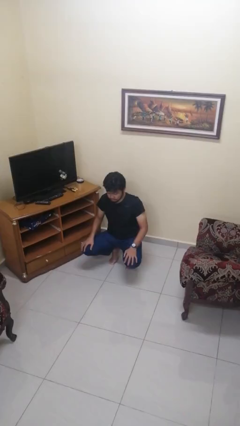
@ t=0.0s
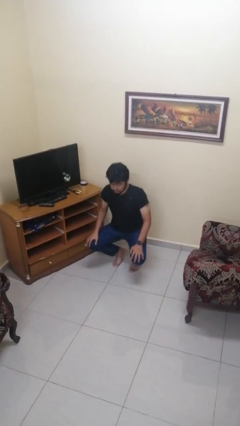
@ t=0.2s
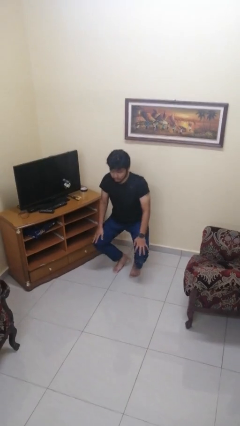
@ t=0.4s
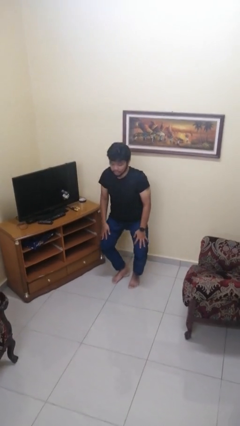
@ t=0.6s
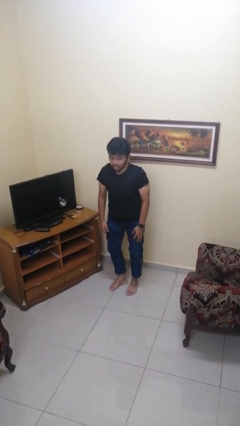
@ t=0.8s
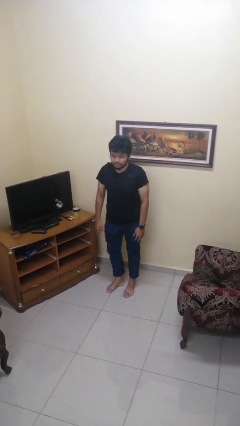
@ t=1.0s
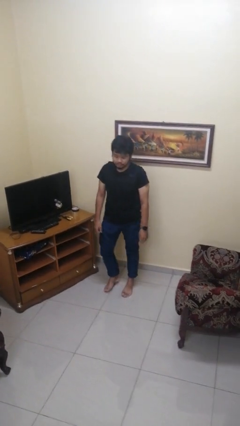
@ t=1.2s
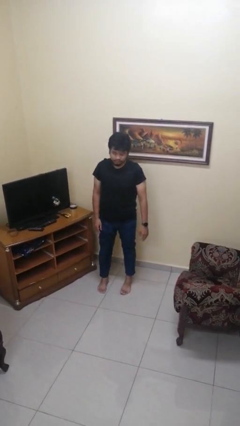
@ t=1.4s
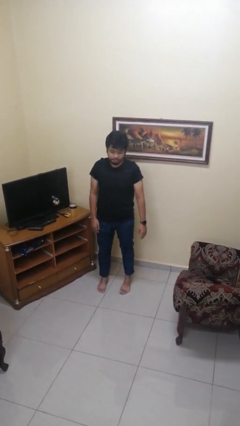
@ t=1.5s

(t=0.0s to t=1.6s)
person stands up

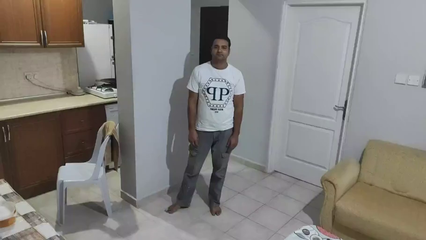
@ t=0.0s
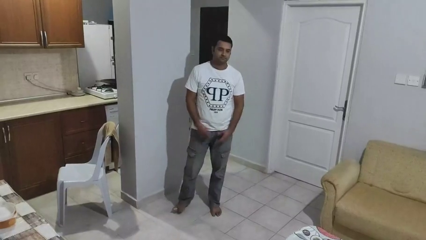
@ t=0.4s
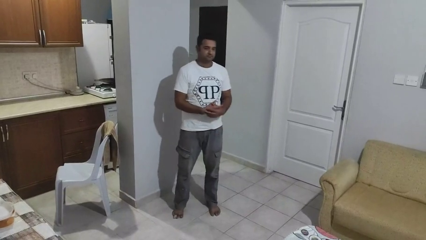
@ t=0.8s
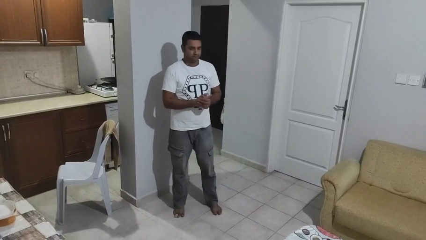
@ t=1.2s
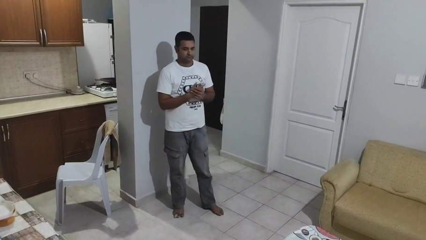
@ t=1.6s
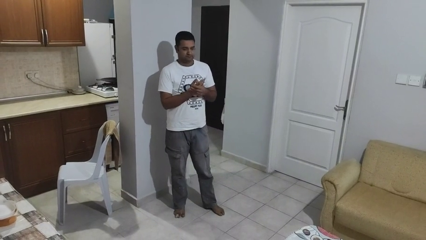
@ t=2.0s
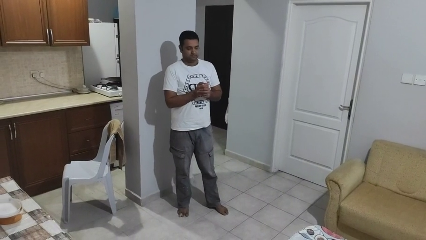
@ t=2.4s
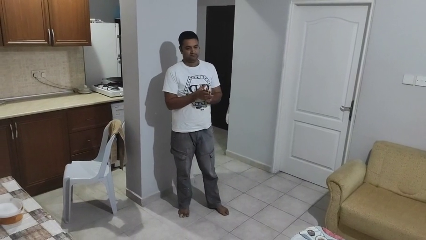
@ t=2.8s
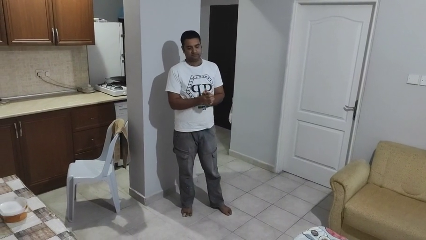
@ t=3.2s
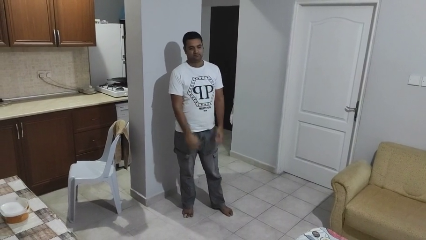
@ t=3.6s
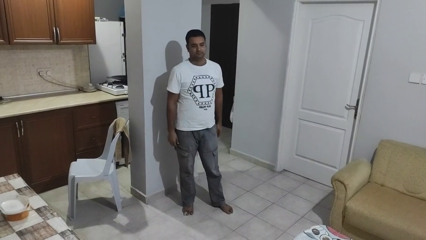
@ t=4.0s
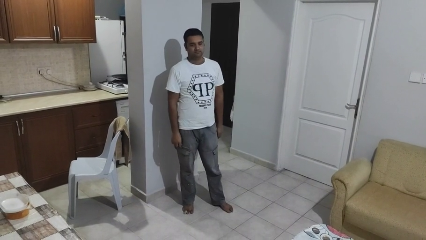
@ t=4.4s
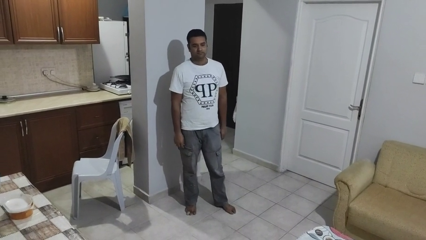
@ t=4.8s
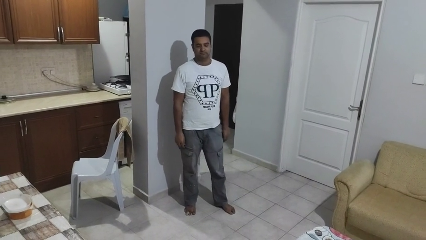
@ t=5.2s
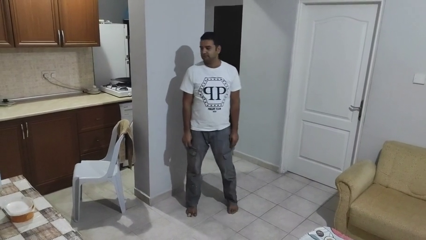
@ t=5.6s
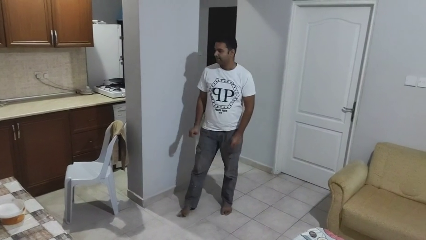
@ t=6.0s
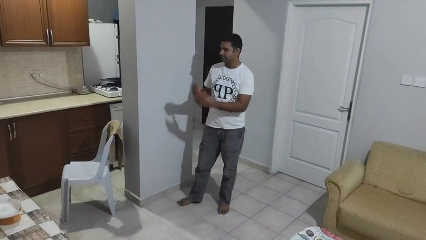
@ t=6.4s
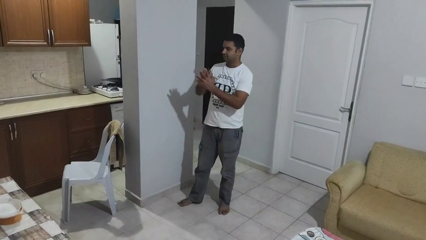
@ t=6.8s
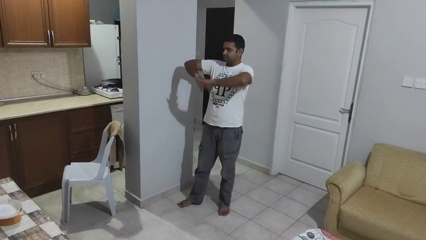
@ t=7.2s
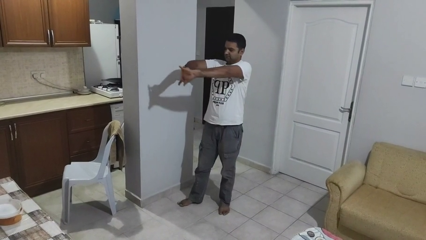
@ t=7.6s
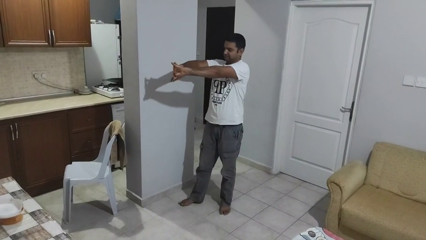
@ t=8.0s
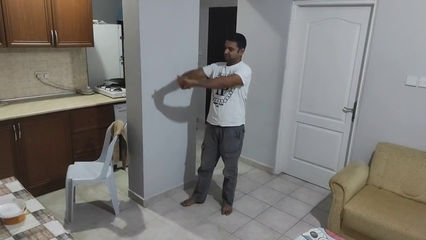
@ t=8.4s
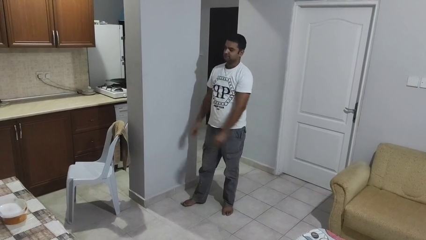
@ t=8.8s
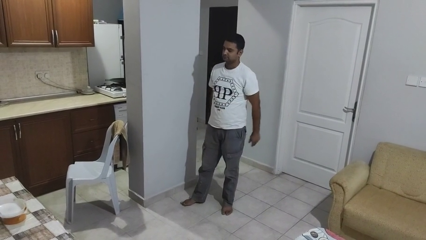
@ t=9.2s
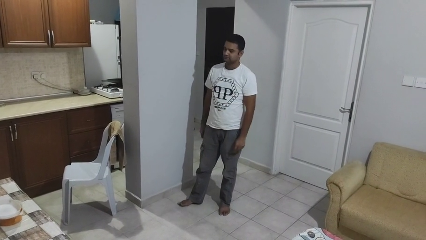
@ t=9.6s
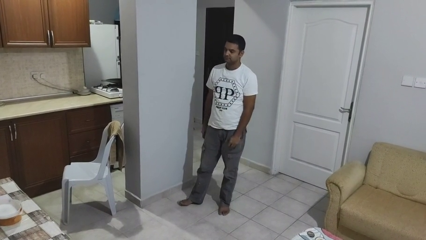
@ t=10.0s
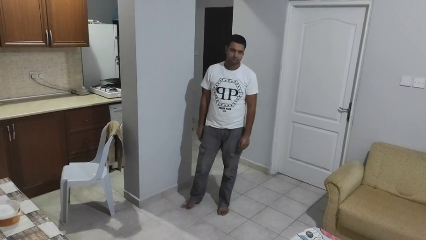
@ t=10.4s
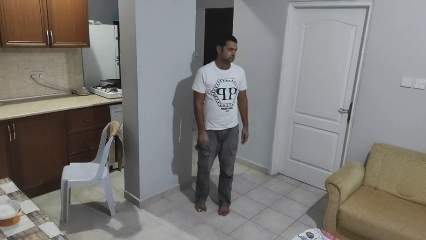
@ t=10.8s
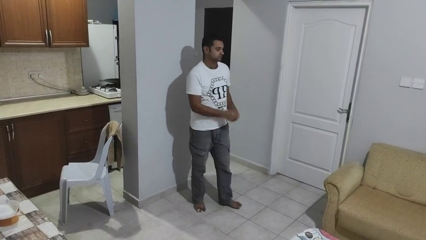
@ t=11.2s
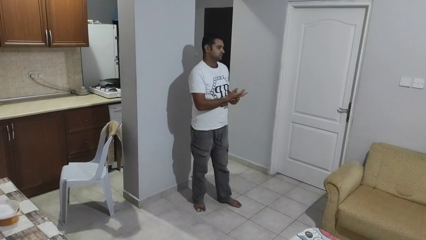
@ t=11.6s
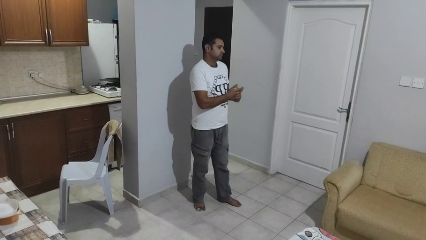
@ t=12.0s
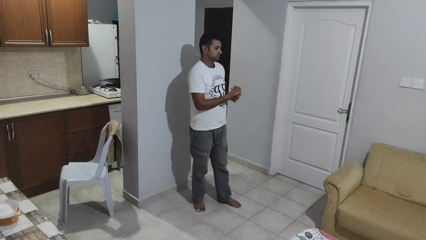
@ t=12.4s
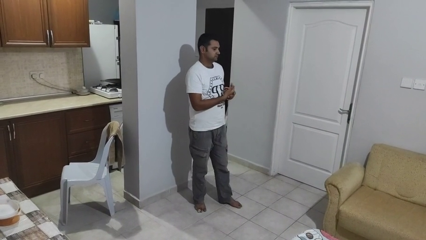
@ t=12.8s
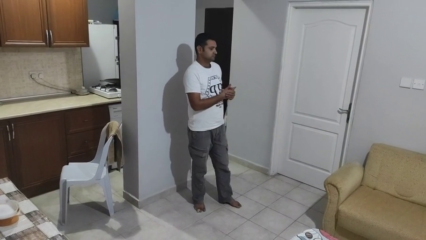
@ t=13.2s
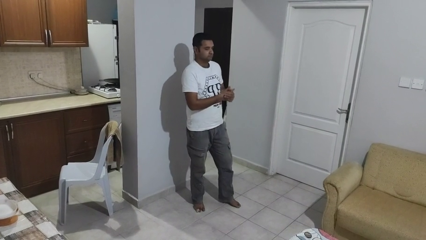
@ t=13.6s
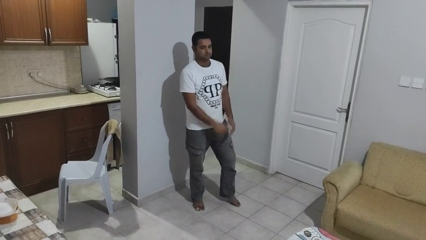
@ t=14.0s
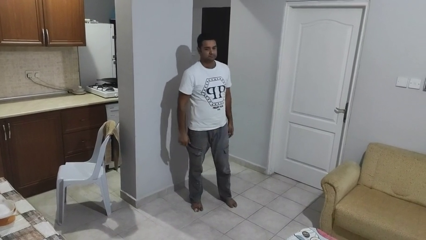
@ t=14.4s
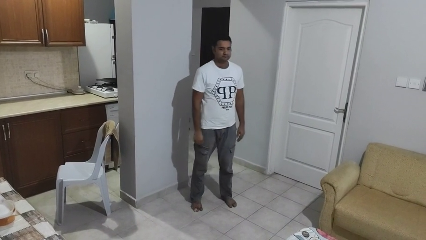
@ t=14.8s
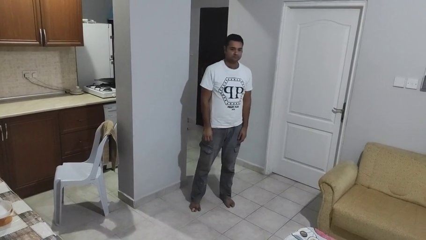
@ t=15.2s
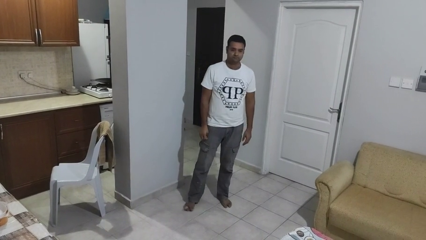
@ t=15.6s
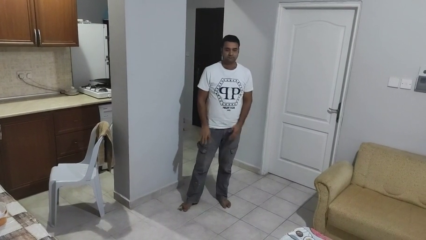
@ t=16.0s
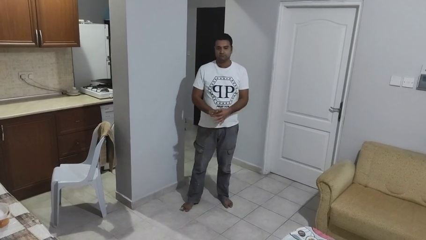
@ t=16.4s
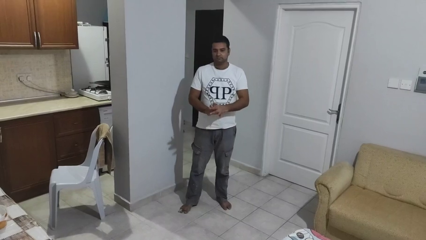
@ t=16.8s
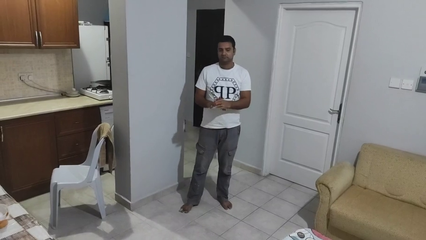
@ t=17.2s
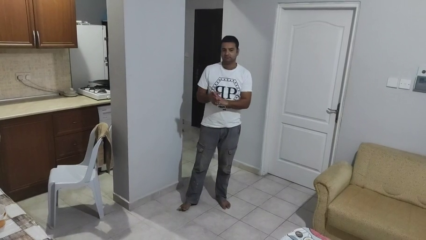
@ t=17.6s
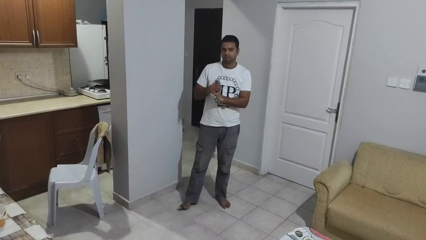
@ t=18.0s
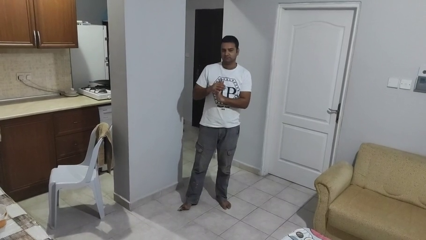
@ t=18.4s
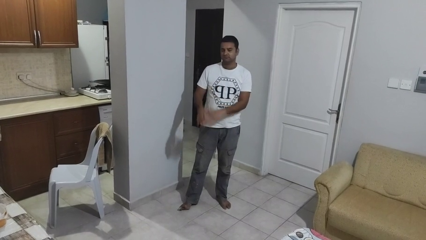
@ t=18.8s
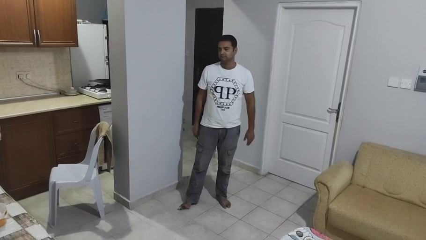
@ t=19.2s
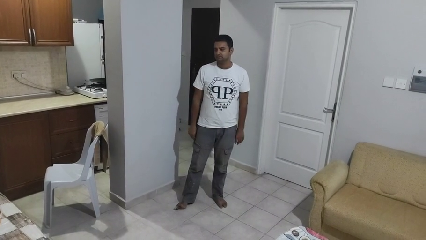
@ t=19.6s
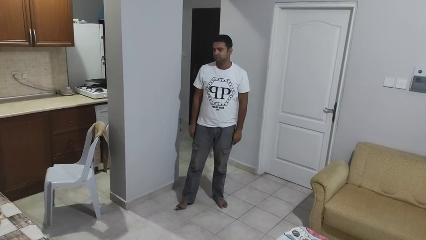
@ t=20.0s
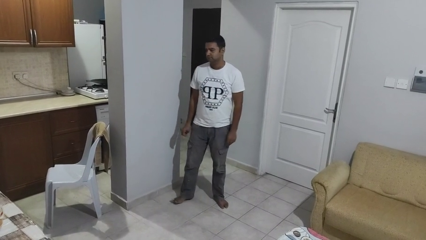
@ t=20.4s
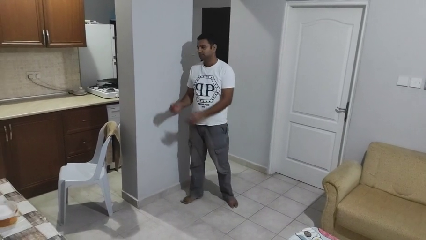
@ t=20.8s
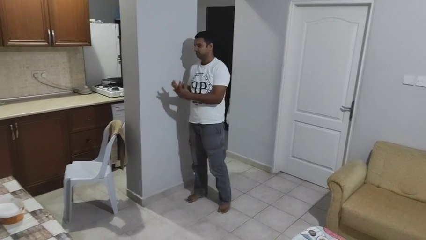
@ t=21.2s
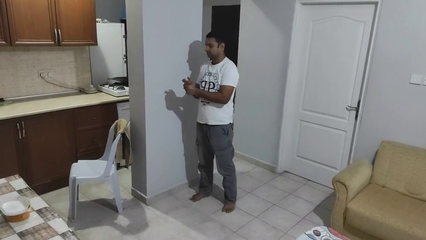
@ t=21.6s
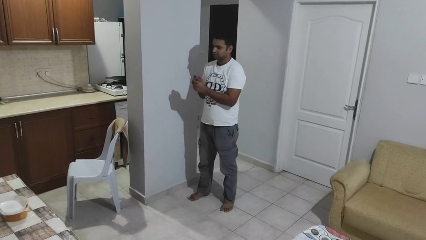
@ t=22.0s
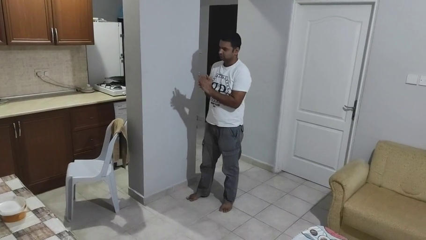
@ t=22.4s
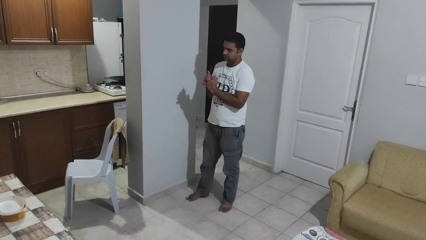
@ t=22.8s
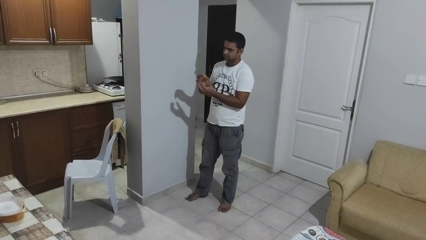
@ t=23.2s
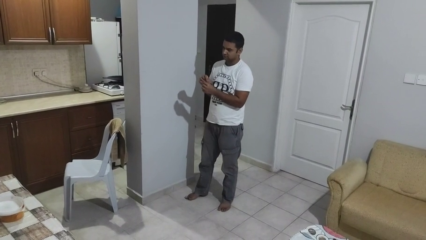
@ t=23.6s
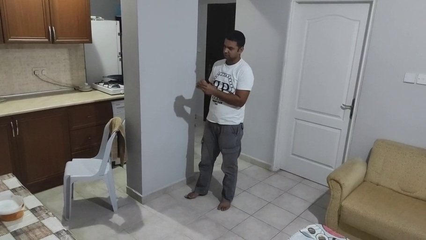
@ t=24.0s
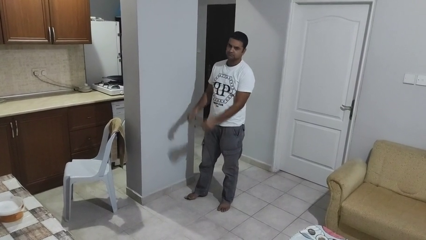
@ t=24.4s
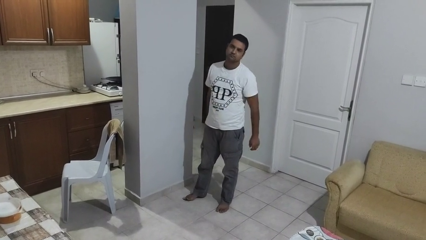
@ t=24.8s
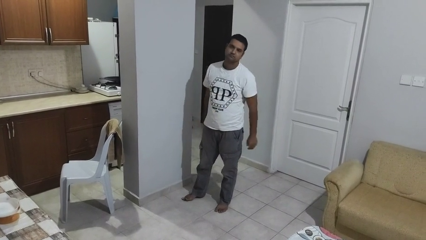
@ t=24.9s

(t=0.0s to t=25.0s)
person cracks knuckles

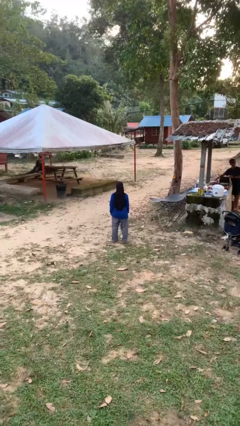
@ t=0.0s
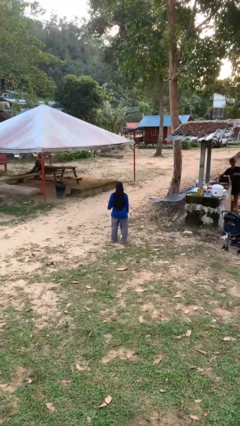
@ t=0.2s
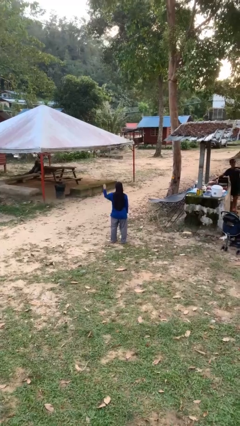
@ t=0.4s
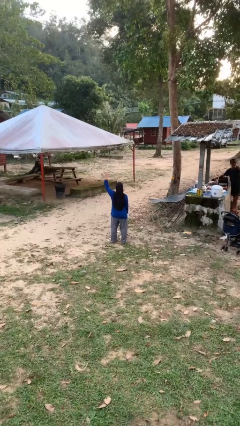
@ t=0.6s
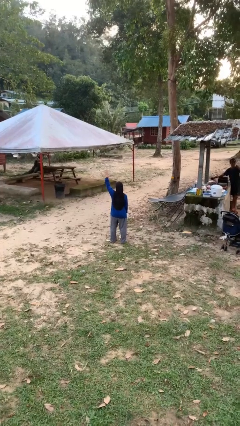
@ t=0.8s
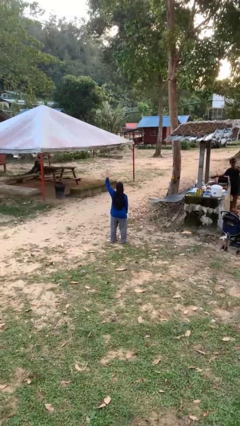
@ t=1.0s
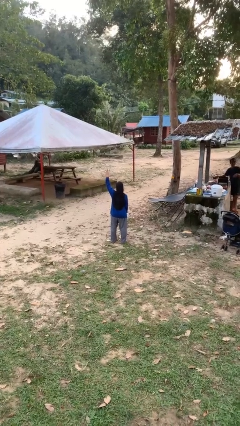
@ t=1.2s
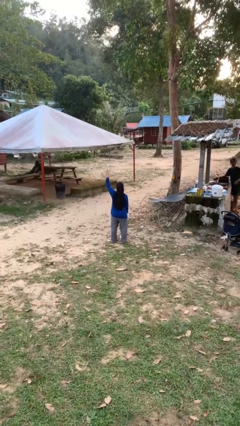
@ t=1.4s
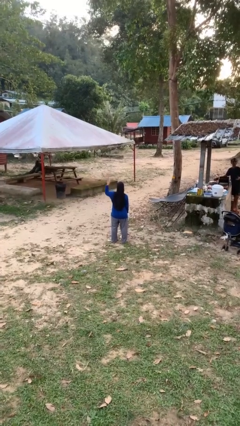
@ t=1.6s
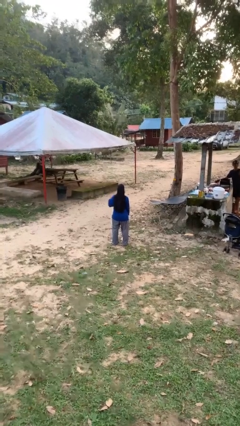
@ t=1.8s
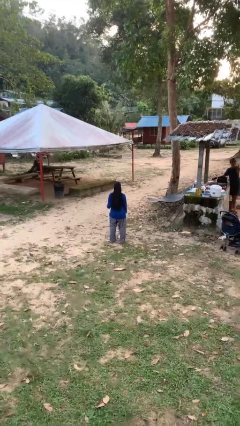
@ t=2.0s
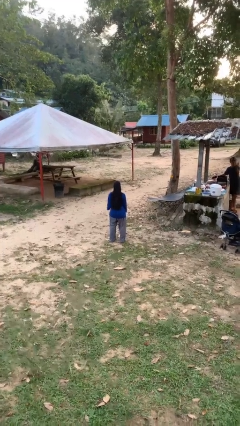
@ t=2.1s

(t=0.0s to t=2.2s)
person gestures number four

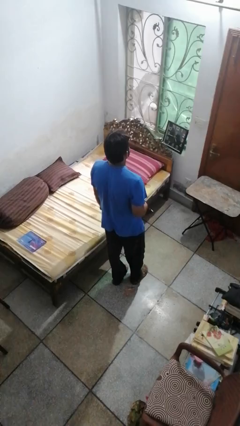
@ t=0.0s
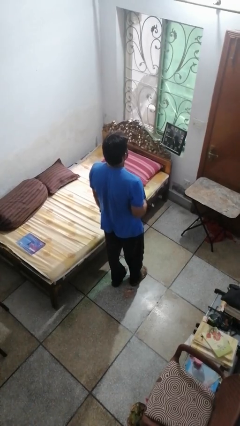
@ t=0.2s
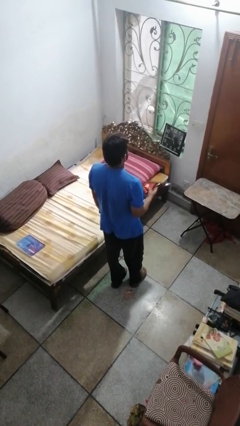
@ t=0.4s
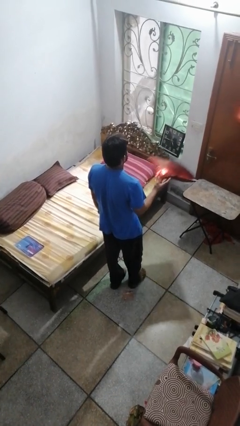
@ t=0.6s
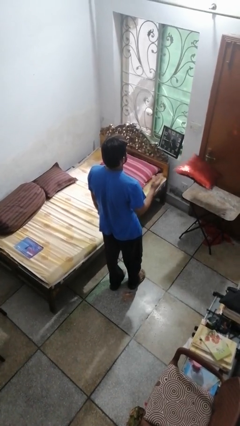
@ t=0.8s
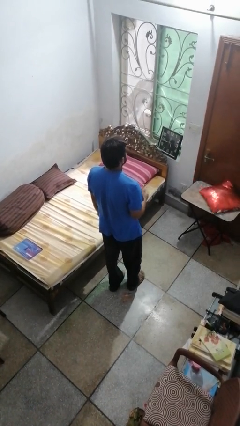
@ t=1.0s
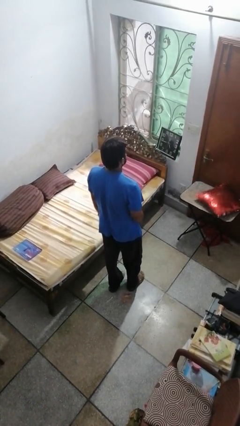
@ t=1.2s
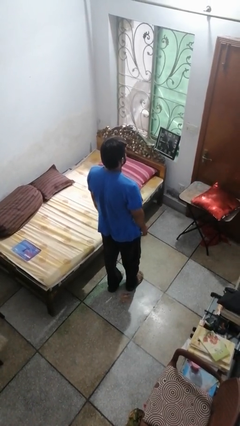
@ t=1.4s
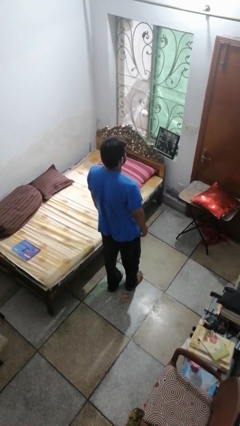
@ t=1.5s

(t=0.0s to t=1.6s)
person throws object on table
